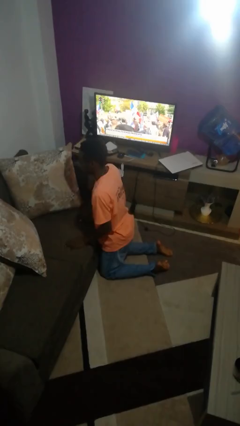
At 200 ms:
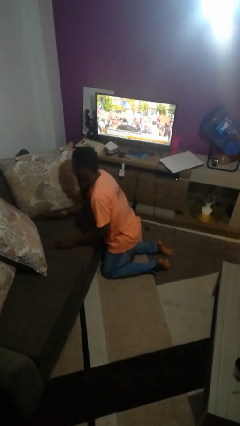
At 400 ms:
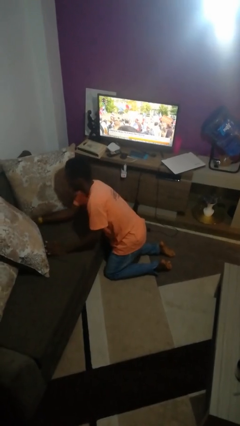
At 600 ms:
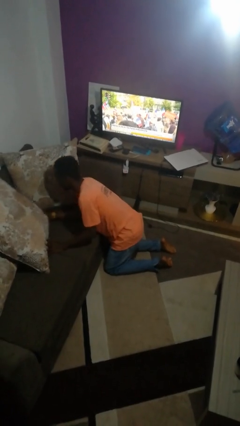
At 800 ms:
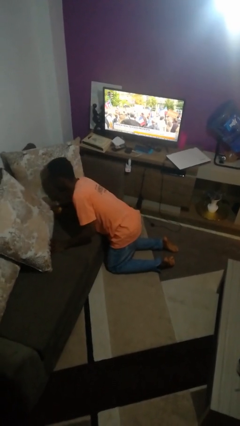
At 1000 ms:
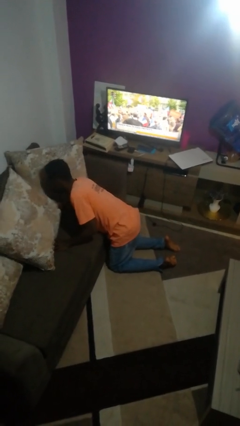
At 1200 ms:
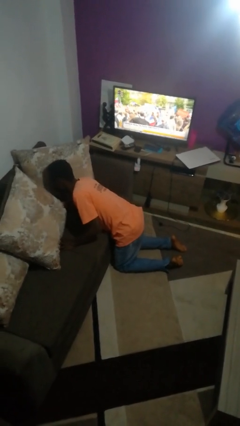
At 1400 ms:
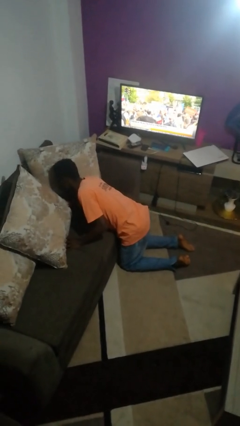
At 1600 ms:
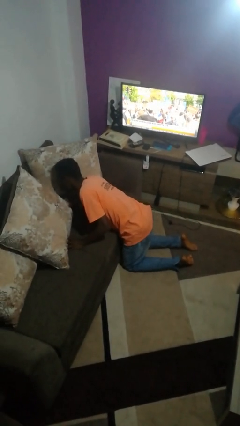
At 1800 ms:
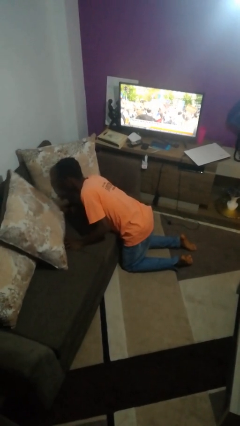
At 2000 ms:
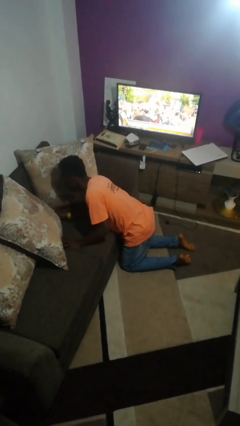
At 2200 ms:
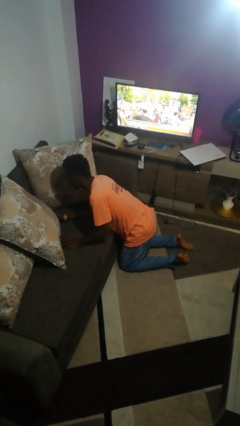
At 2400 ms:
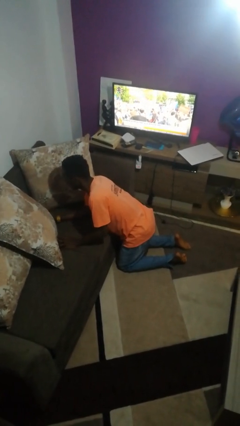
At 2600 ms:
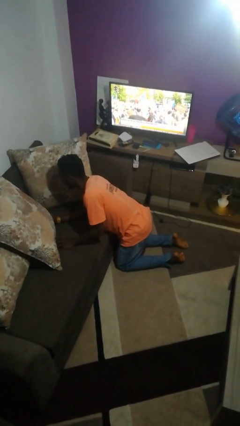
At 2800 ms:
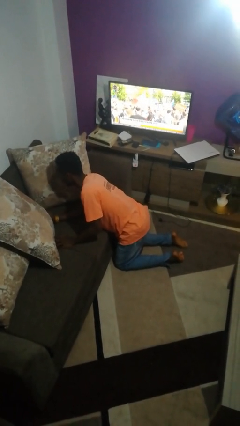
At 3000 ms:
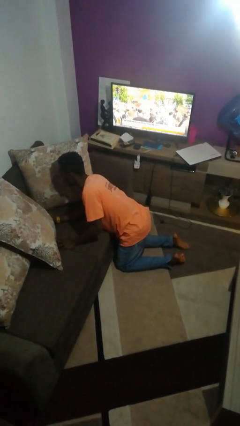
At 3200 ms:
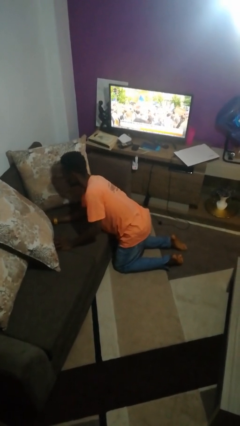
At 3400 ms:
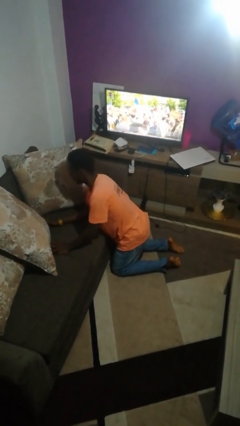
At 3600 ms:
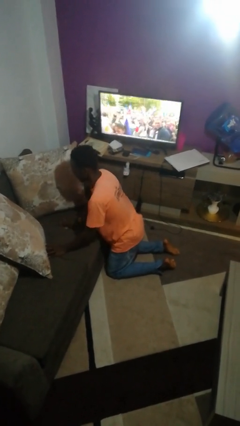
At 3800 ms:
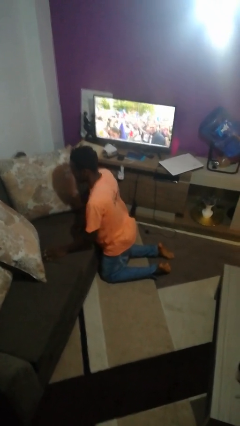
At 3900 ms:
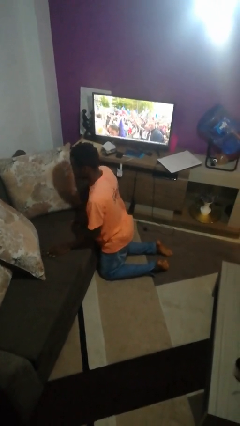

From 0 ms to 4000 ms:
person searches in couch

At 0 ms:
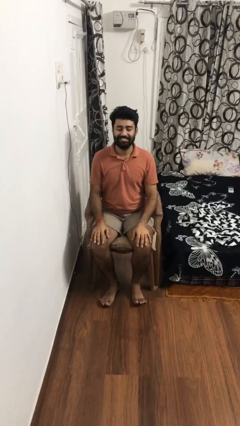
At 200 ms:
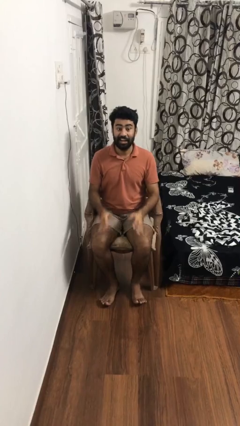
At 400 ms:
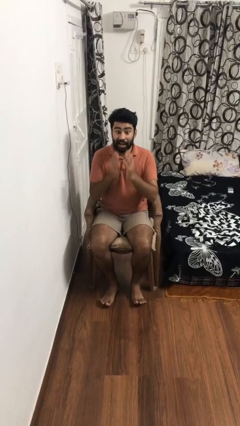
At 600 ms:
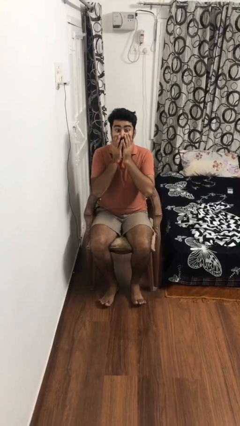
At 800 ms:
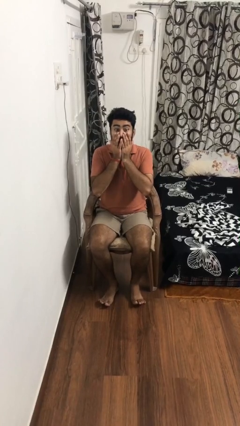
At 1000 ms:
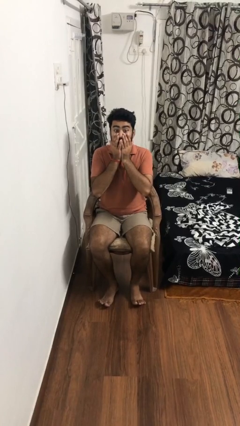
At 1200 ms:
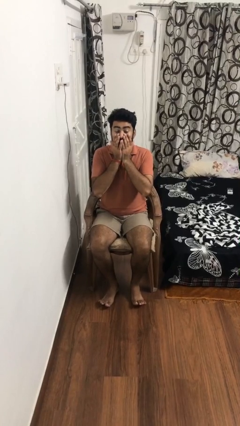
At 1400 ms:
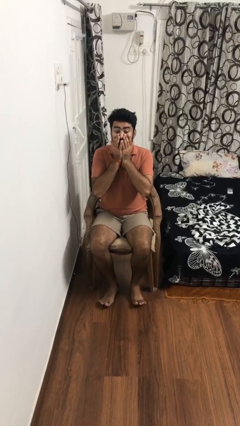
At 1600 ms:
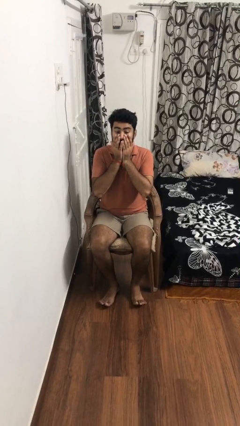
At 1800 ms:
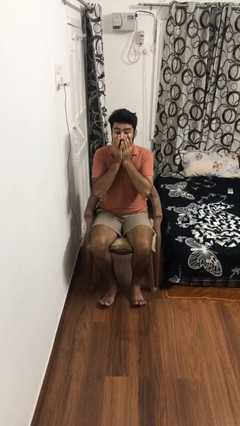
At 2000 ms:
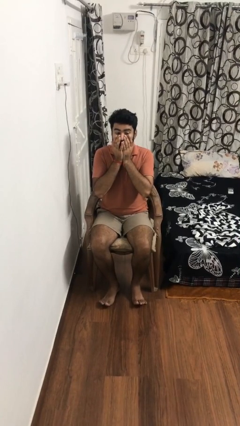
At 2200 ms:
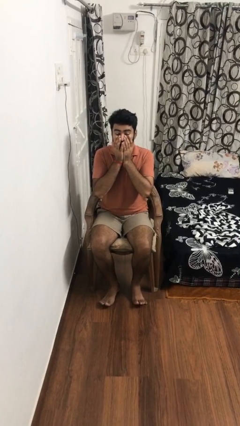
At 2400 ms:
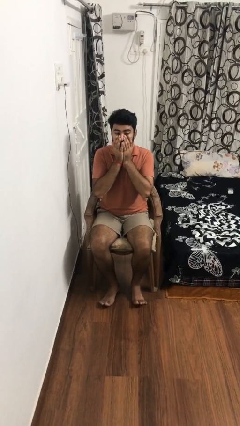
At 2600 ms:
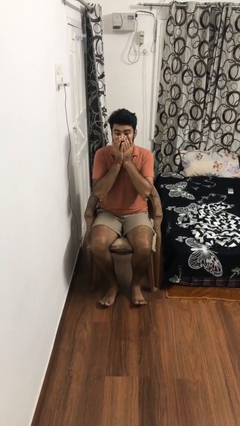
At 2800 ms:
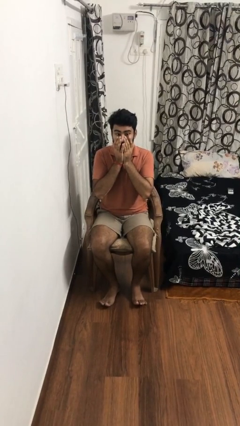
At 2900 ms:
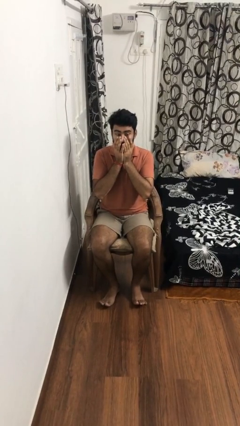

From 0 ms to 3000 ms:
person covers face with hands

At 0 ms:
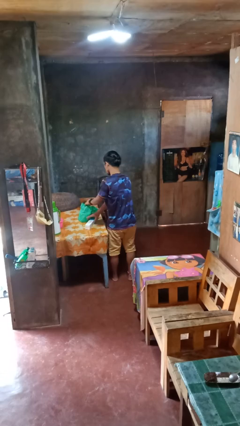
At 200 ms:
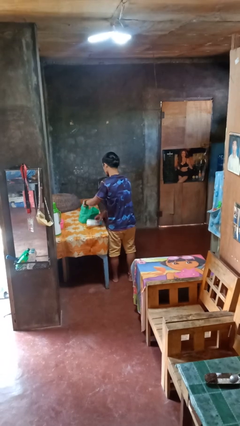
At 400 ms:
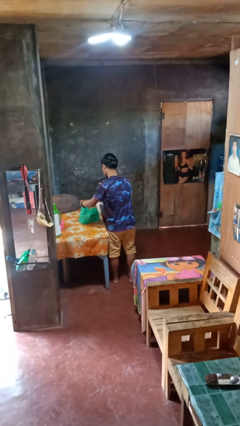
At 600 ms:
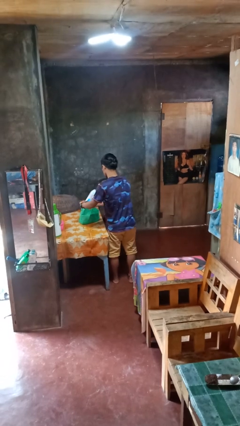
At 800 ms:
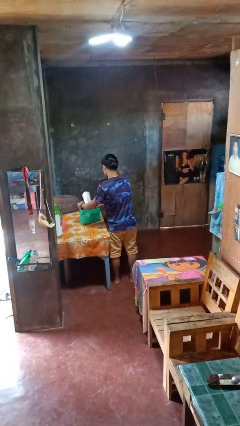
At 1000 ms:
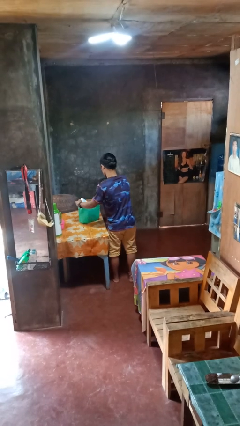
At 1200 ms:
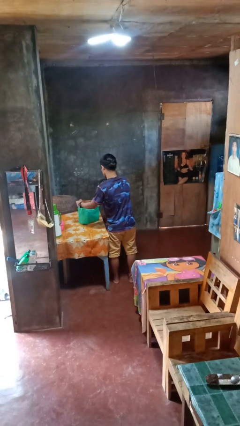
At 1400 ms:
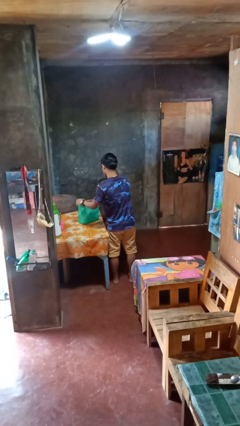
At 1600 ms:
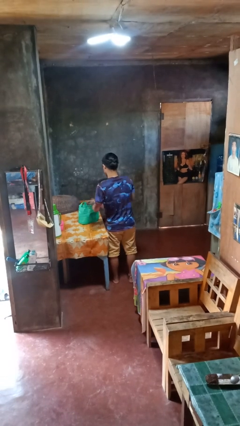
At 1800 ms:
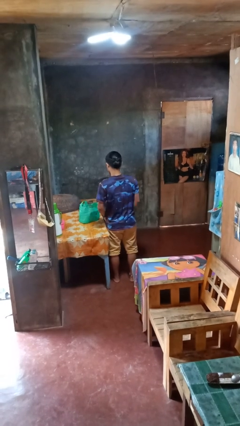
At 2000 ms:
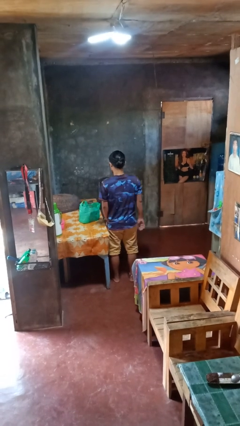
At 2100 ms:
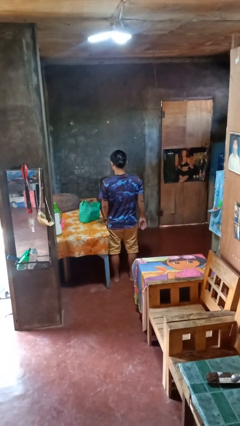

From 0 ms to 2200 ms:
person puts object into bag

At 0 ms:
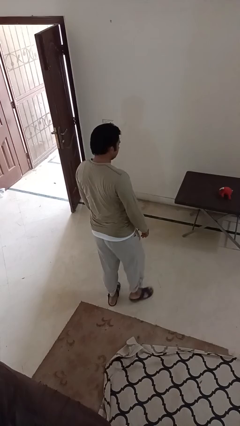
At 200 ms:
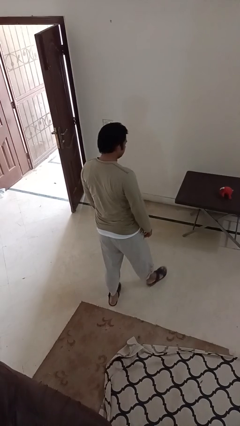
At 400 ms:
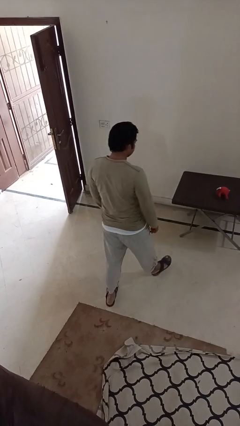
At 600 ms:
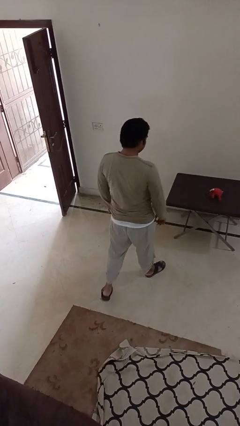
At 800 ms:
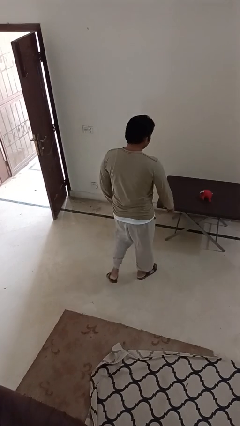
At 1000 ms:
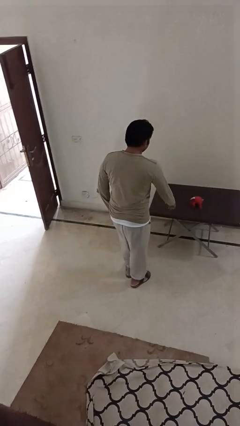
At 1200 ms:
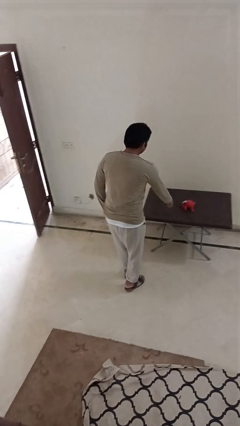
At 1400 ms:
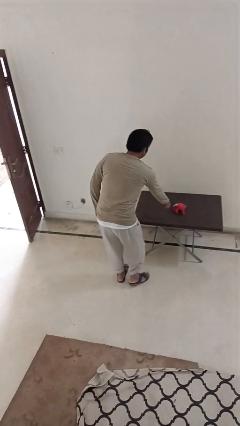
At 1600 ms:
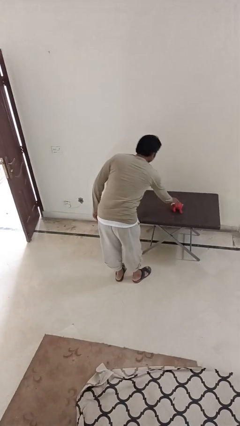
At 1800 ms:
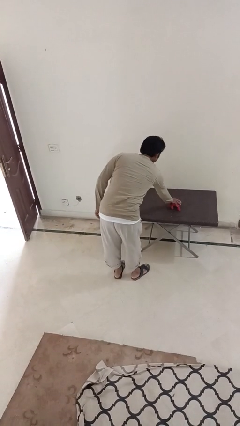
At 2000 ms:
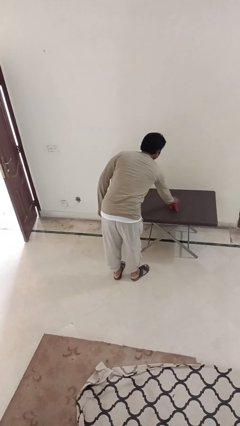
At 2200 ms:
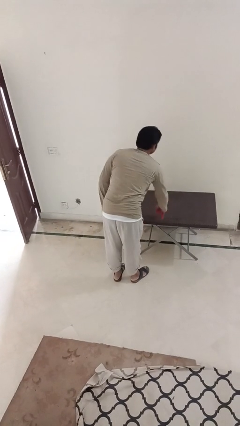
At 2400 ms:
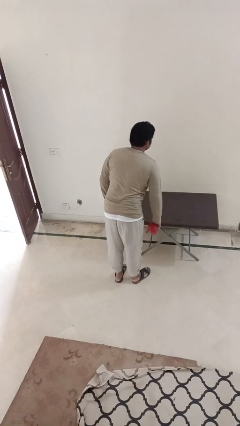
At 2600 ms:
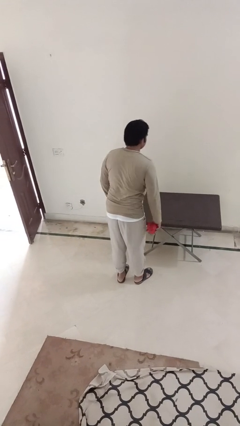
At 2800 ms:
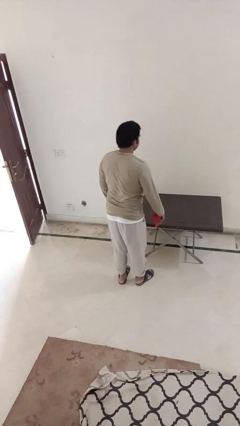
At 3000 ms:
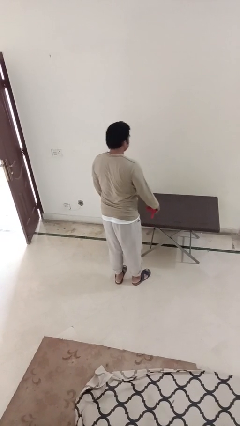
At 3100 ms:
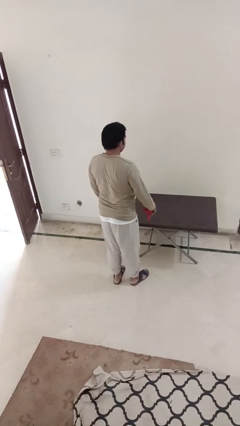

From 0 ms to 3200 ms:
person picks up object from table

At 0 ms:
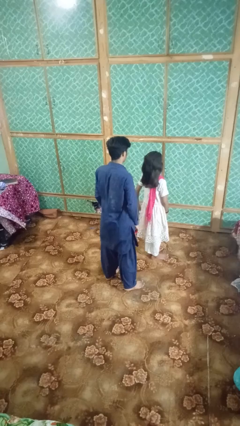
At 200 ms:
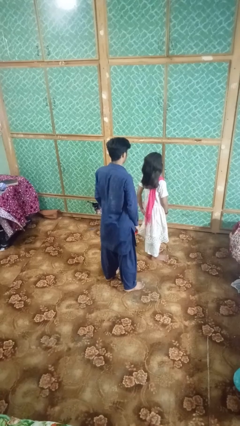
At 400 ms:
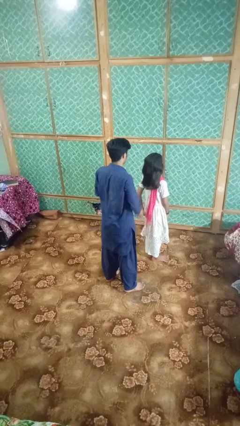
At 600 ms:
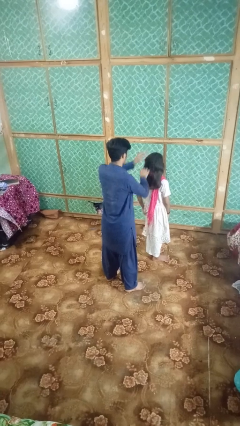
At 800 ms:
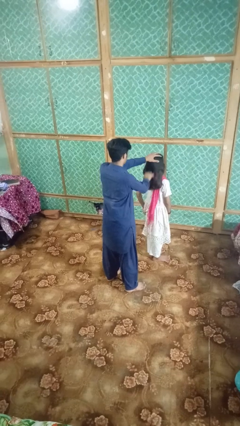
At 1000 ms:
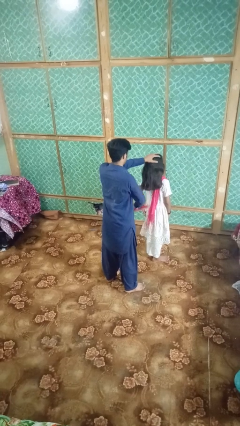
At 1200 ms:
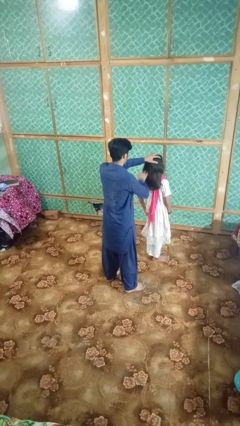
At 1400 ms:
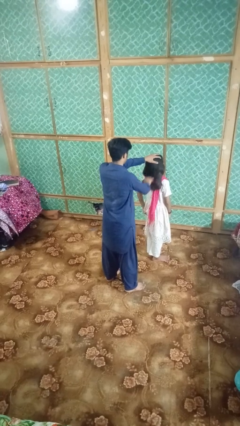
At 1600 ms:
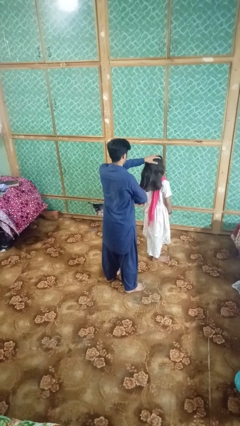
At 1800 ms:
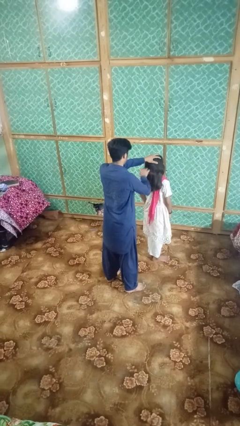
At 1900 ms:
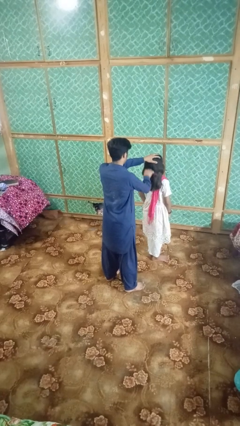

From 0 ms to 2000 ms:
person brushes hair of person

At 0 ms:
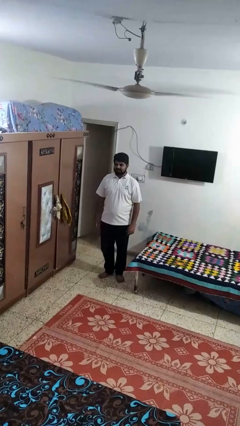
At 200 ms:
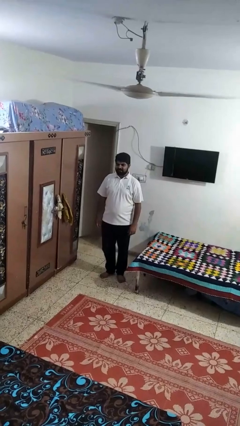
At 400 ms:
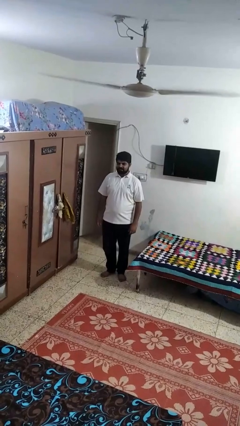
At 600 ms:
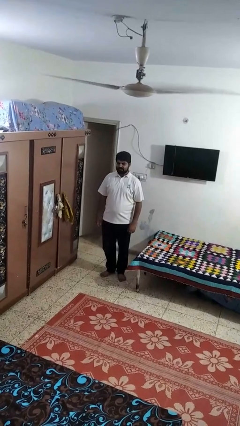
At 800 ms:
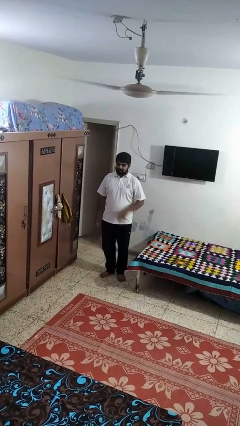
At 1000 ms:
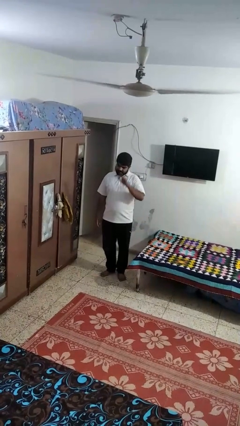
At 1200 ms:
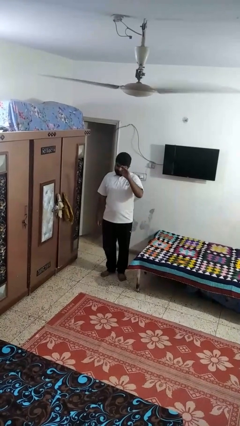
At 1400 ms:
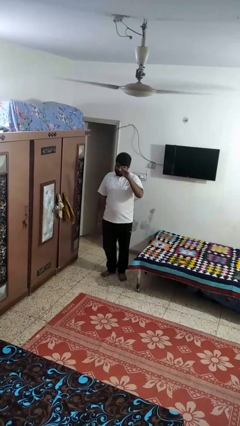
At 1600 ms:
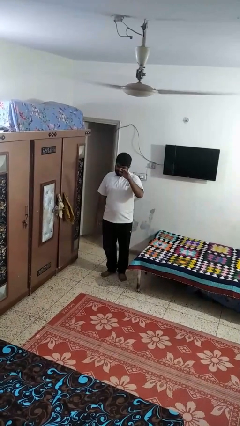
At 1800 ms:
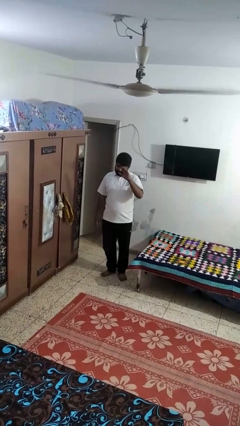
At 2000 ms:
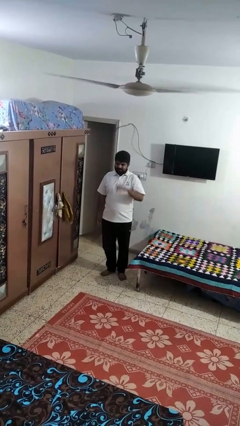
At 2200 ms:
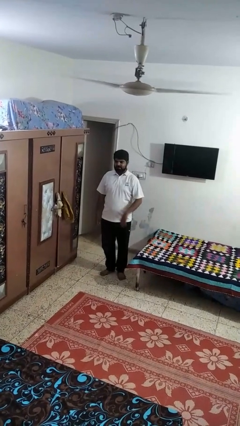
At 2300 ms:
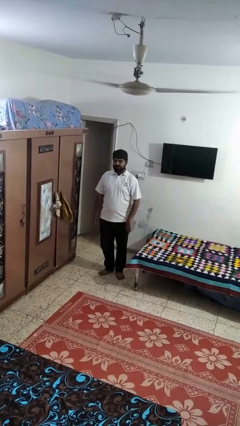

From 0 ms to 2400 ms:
person gestures come here

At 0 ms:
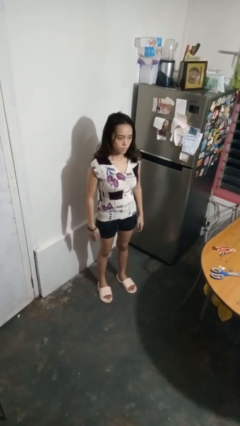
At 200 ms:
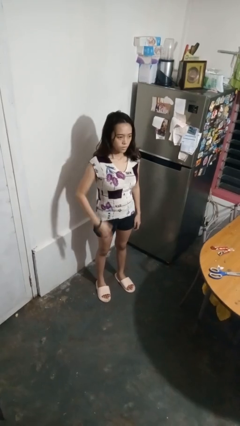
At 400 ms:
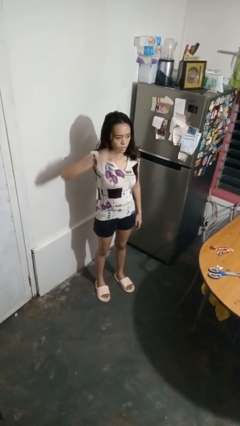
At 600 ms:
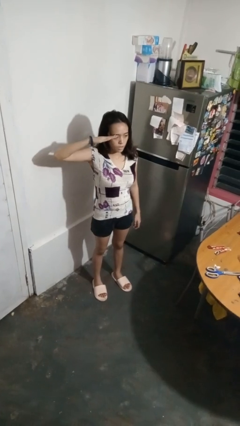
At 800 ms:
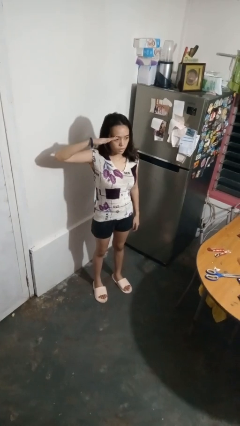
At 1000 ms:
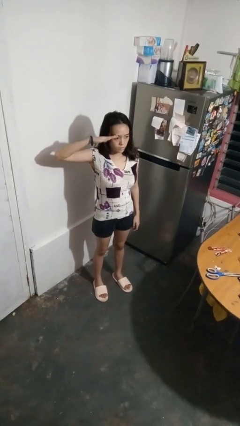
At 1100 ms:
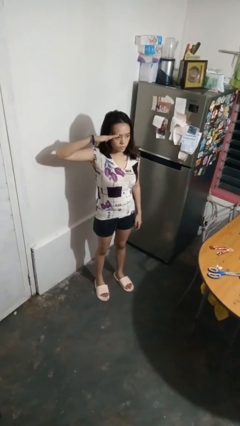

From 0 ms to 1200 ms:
person salutes
